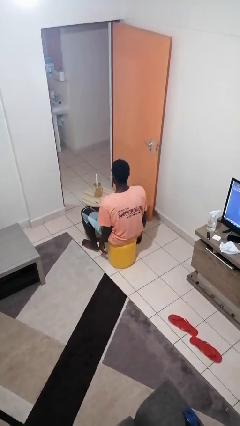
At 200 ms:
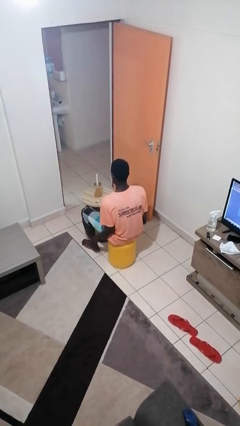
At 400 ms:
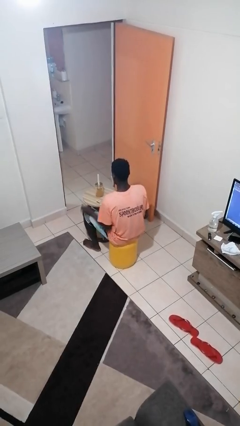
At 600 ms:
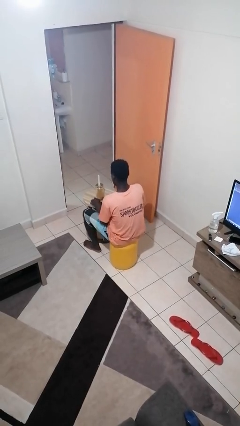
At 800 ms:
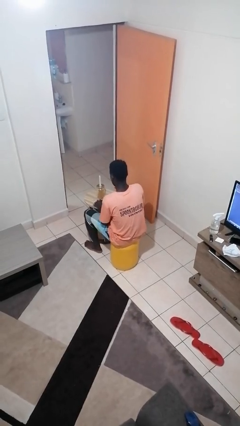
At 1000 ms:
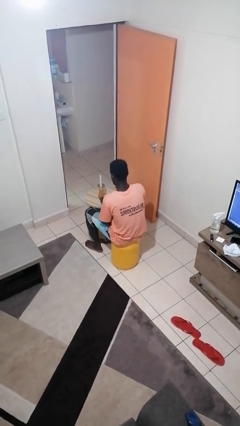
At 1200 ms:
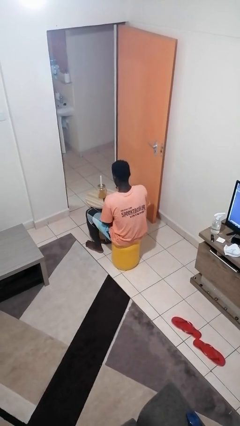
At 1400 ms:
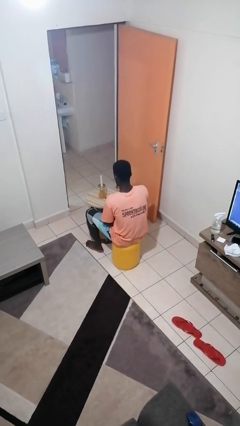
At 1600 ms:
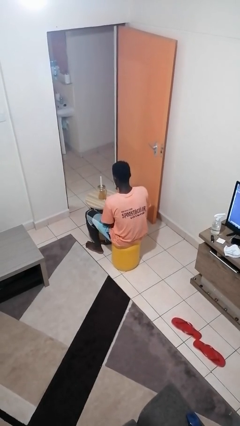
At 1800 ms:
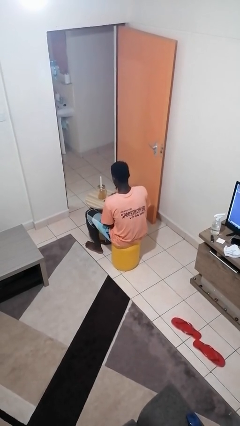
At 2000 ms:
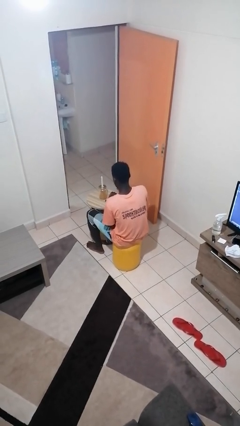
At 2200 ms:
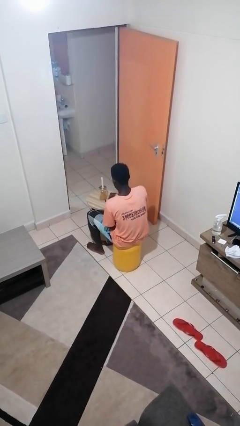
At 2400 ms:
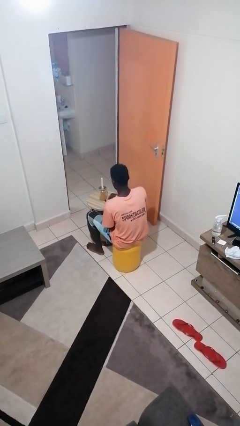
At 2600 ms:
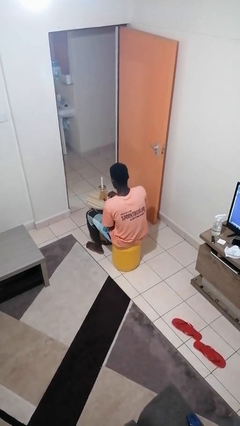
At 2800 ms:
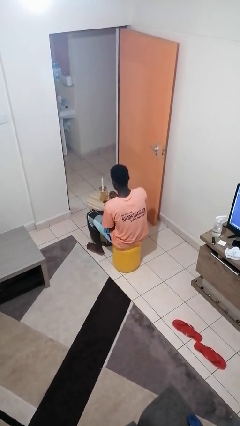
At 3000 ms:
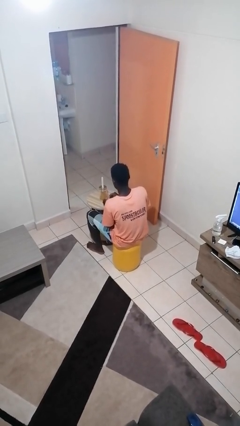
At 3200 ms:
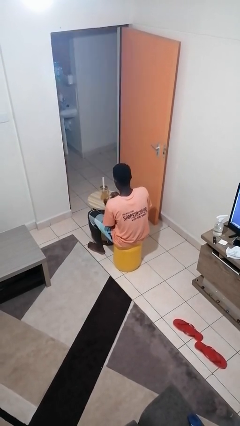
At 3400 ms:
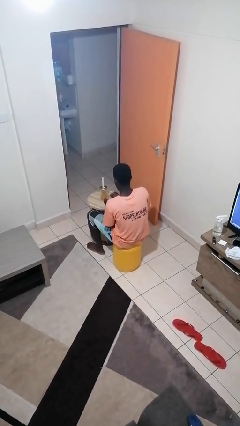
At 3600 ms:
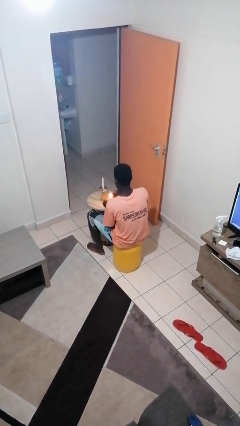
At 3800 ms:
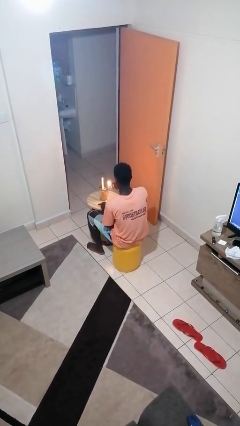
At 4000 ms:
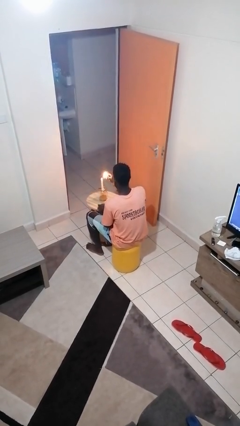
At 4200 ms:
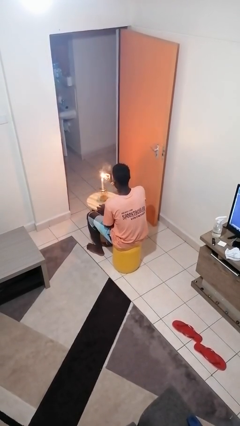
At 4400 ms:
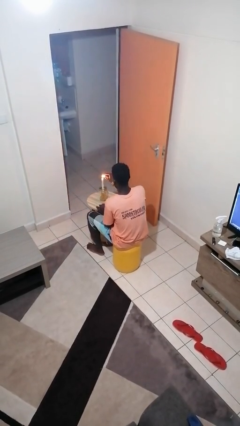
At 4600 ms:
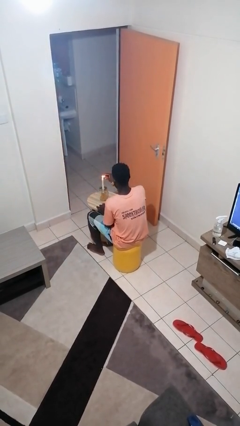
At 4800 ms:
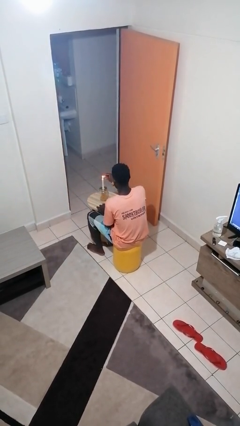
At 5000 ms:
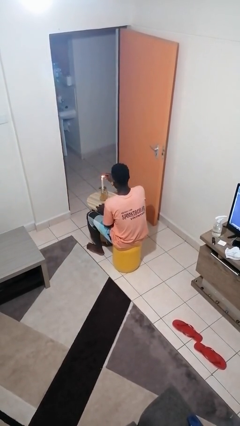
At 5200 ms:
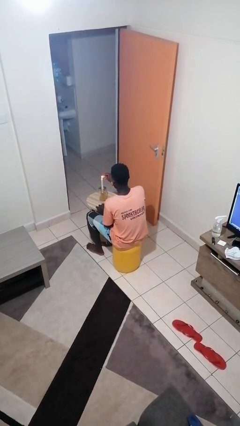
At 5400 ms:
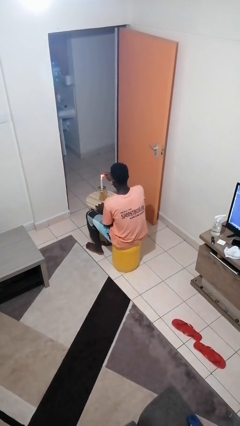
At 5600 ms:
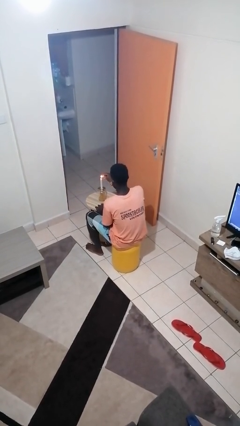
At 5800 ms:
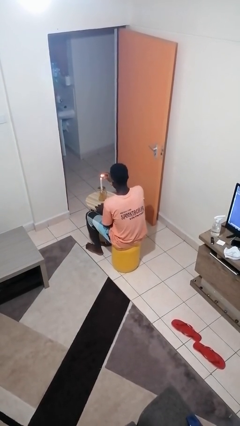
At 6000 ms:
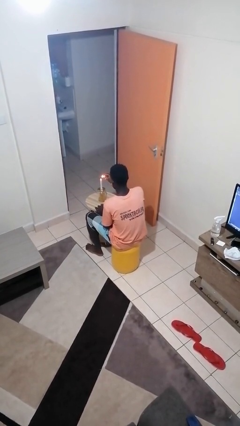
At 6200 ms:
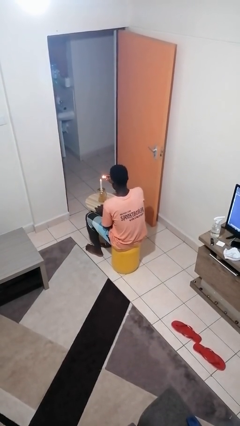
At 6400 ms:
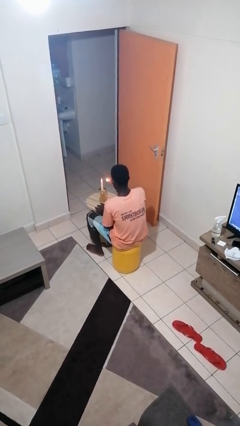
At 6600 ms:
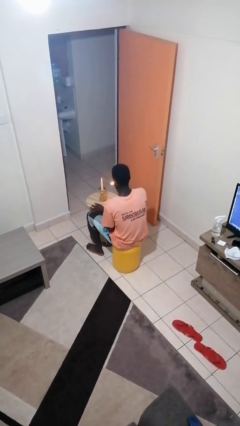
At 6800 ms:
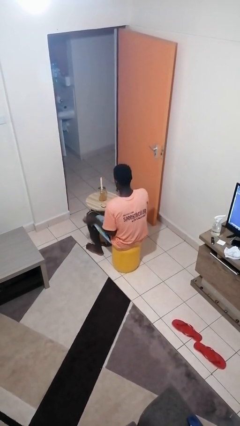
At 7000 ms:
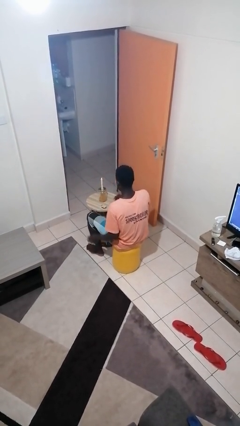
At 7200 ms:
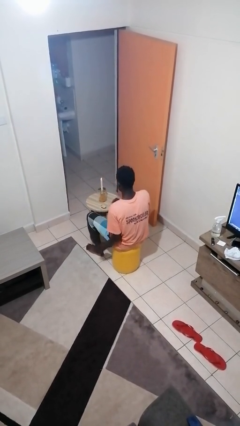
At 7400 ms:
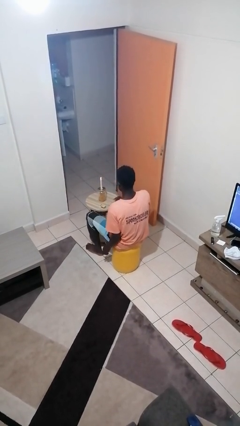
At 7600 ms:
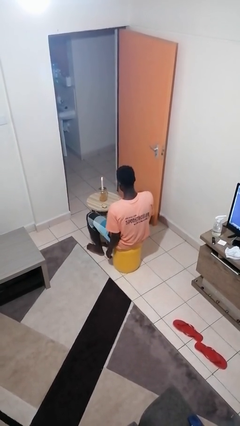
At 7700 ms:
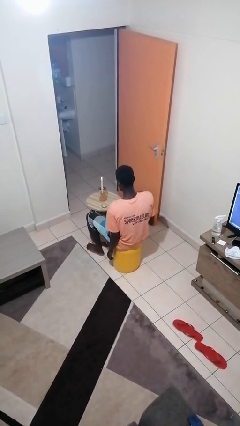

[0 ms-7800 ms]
person lights candle

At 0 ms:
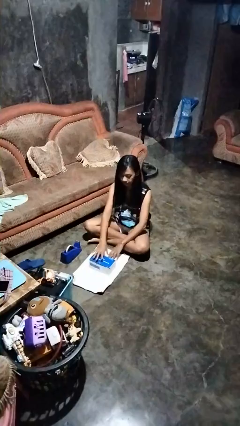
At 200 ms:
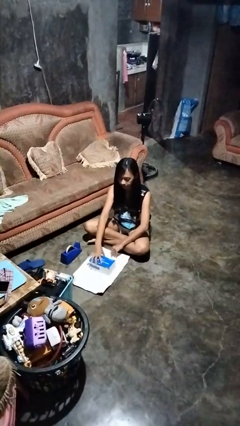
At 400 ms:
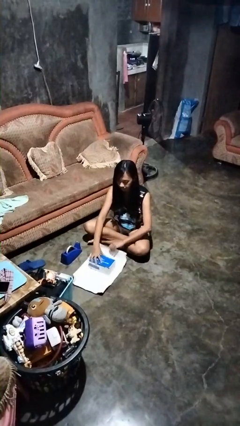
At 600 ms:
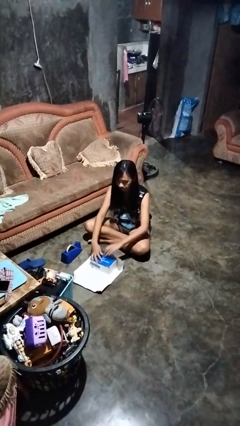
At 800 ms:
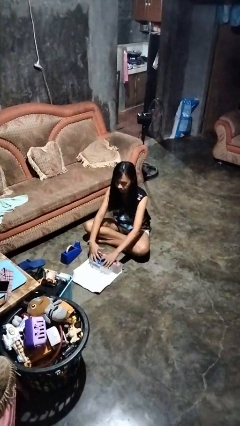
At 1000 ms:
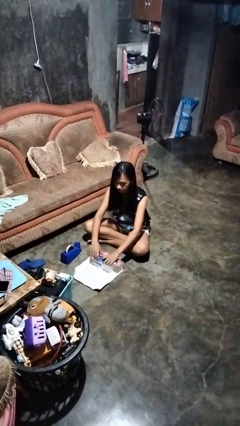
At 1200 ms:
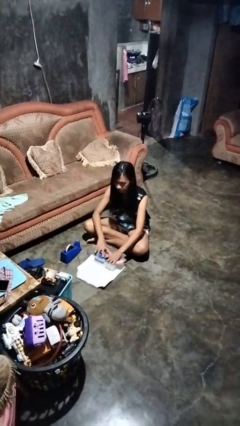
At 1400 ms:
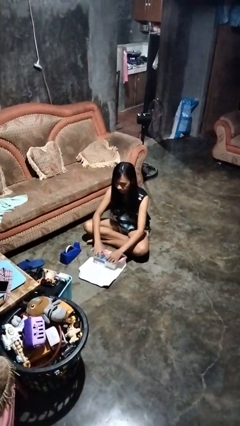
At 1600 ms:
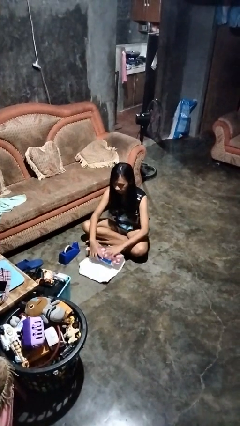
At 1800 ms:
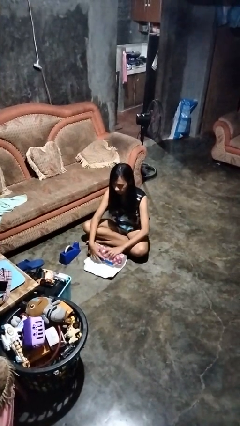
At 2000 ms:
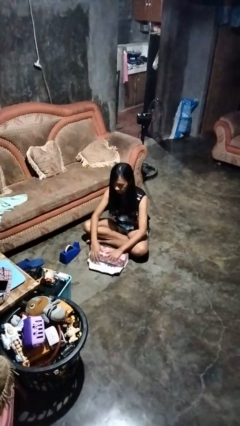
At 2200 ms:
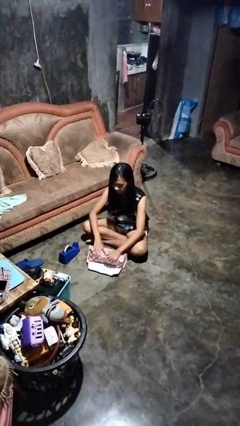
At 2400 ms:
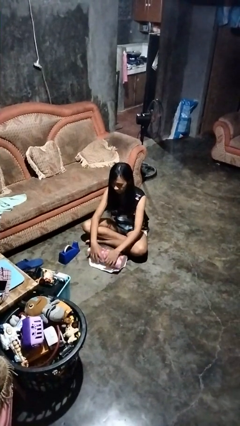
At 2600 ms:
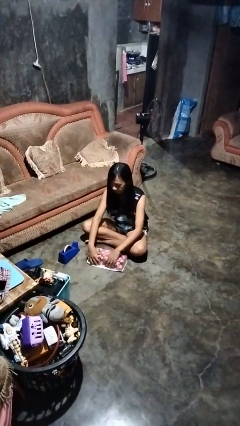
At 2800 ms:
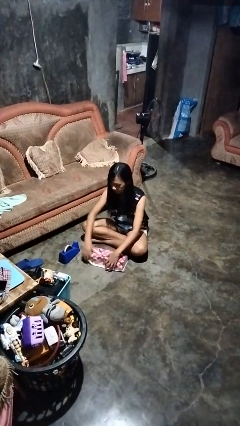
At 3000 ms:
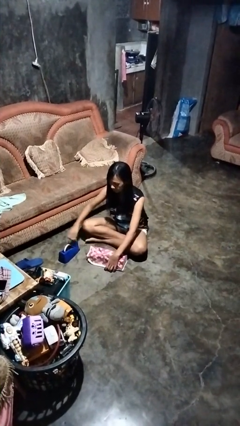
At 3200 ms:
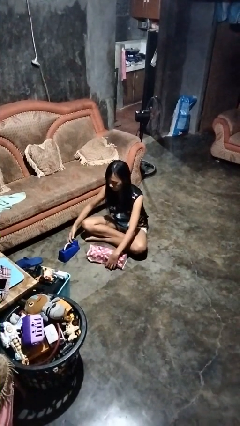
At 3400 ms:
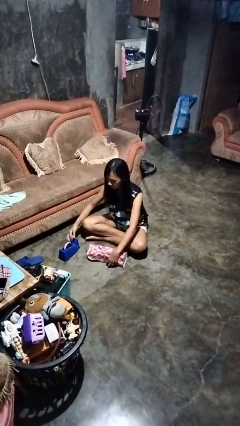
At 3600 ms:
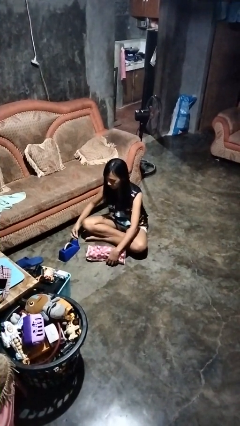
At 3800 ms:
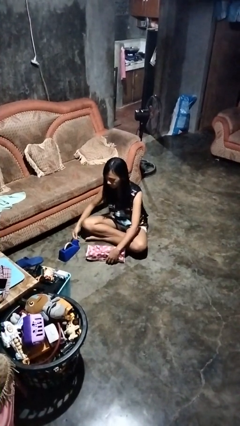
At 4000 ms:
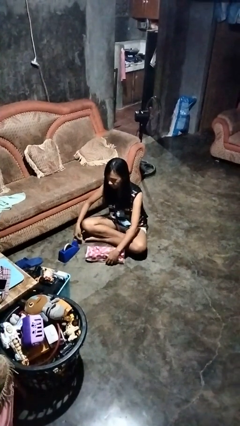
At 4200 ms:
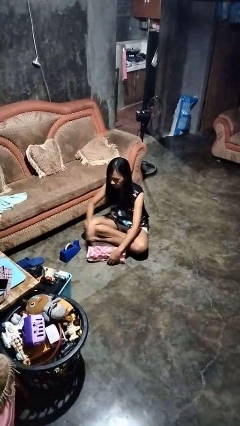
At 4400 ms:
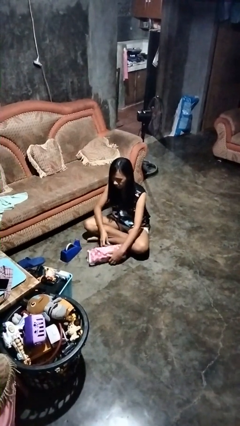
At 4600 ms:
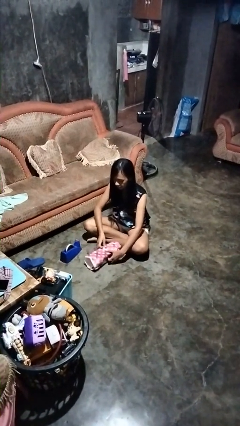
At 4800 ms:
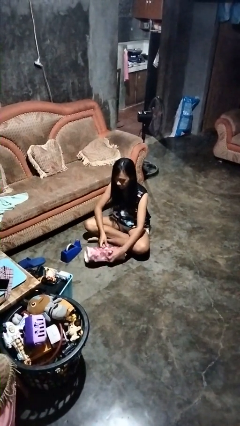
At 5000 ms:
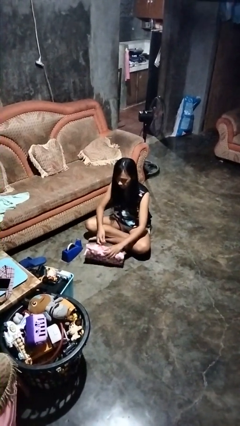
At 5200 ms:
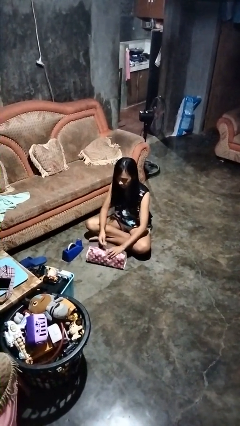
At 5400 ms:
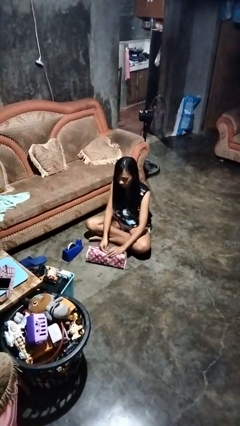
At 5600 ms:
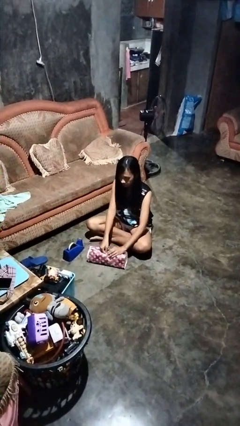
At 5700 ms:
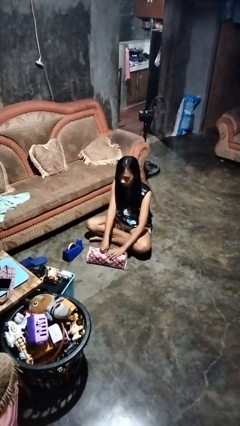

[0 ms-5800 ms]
person wraps box

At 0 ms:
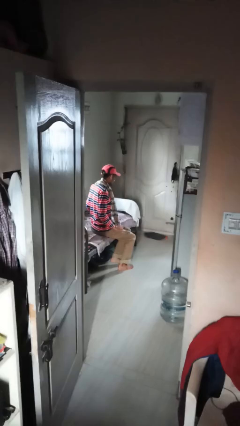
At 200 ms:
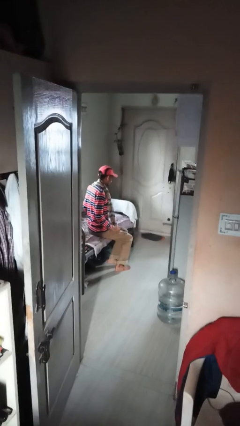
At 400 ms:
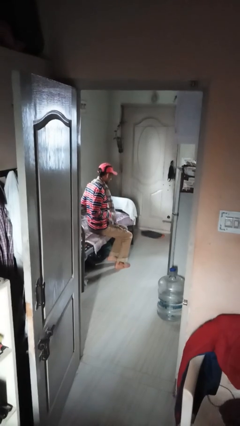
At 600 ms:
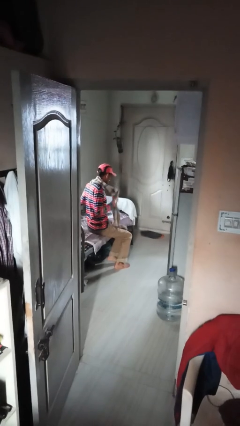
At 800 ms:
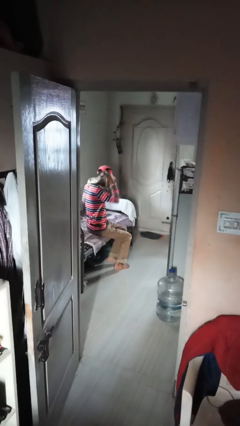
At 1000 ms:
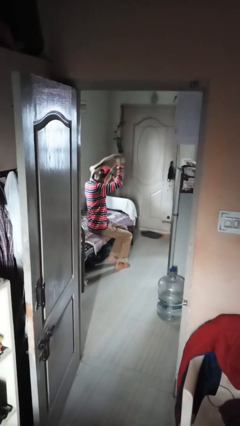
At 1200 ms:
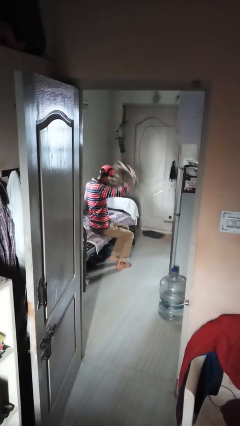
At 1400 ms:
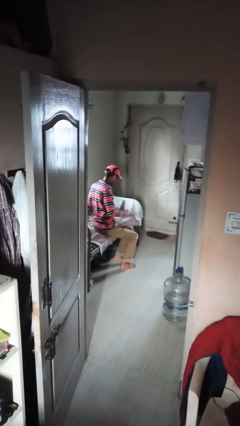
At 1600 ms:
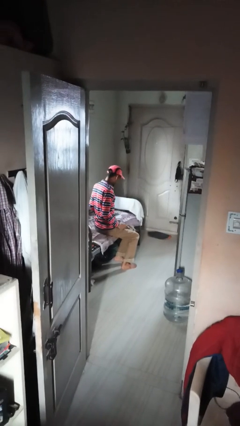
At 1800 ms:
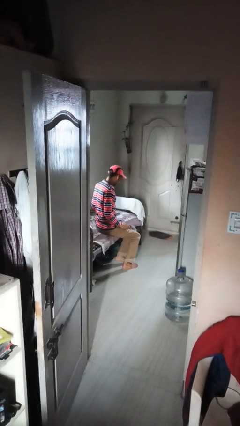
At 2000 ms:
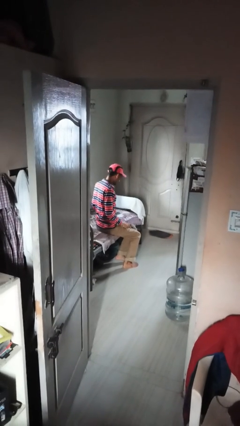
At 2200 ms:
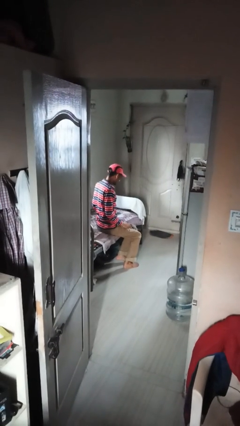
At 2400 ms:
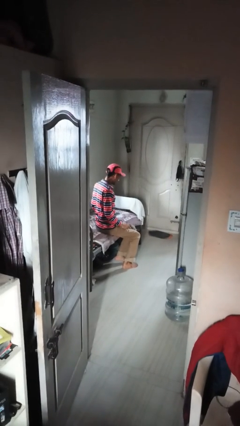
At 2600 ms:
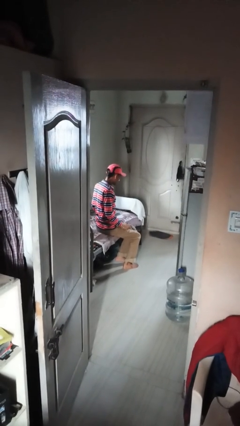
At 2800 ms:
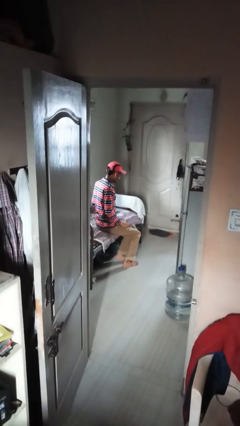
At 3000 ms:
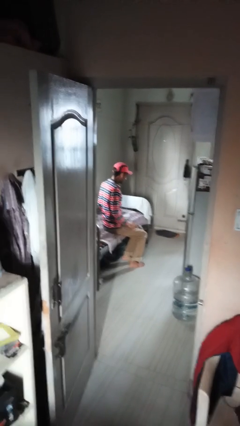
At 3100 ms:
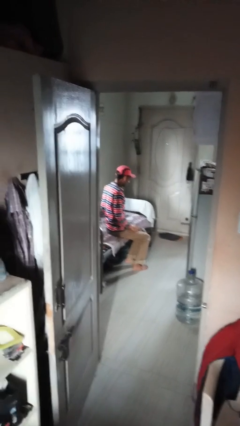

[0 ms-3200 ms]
person takes off scarf

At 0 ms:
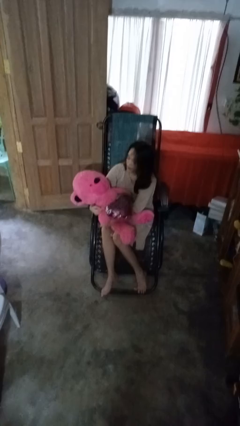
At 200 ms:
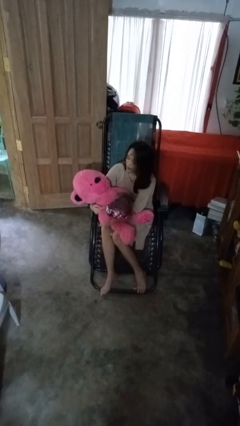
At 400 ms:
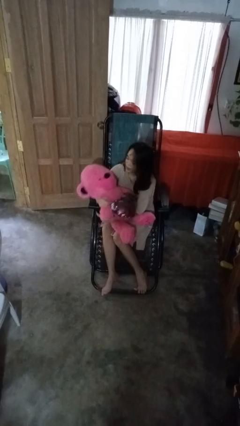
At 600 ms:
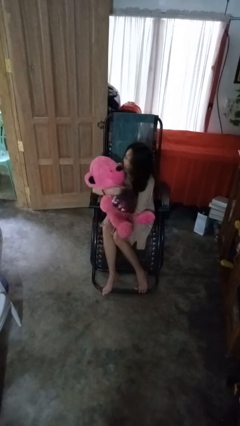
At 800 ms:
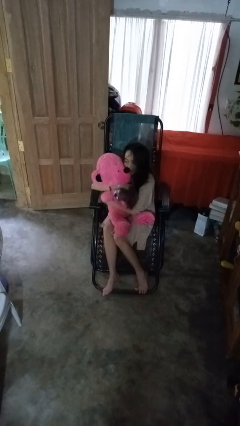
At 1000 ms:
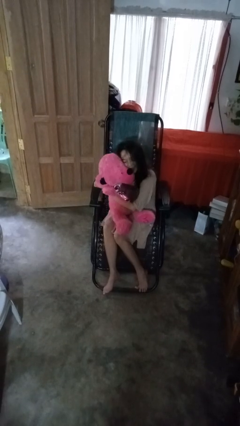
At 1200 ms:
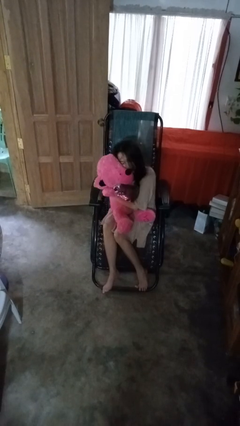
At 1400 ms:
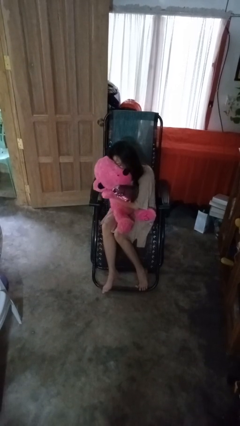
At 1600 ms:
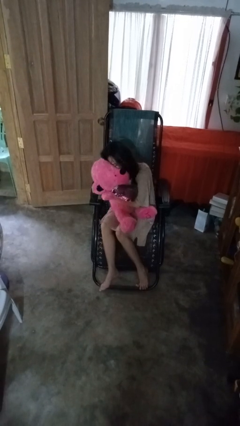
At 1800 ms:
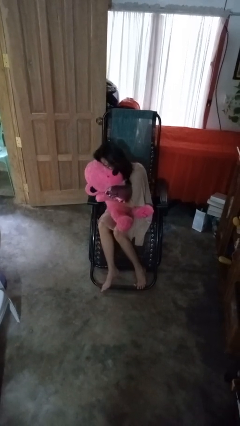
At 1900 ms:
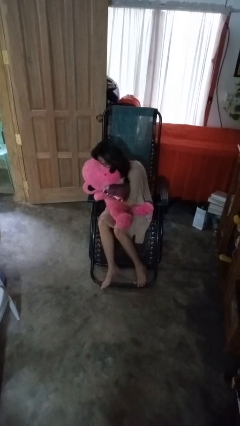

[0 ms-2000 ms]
person hugs stuffed animal
